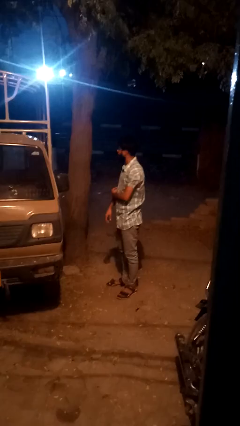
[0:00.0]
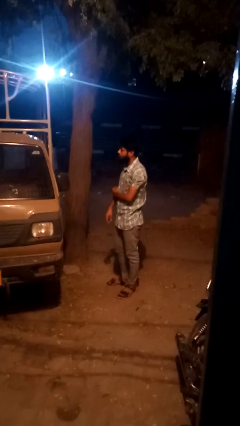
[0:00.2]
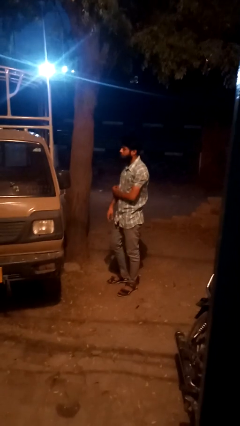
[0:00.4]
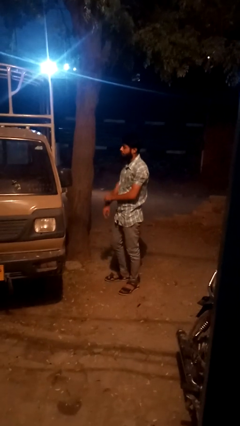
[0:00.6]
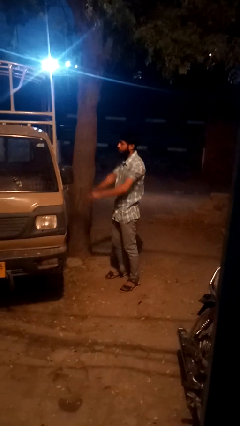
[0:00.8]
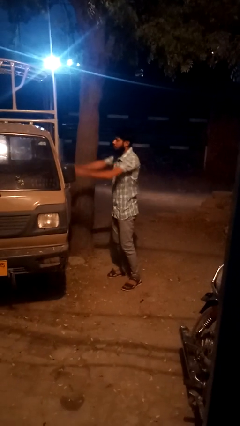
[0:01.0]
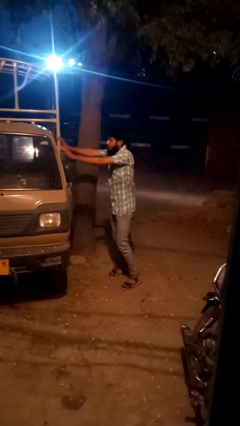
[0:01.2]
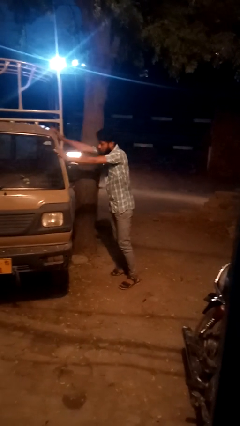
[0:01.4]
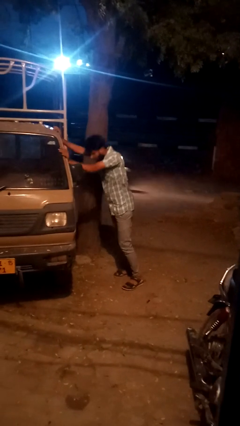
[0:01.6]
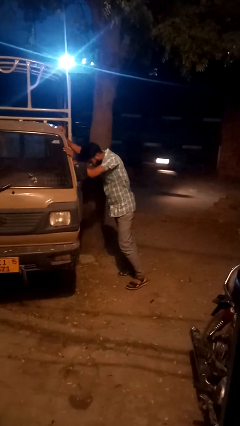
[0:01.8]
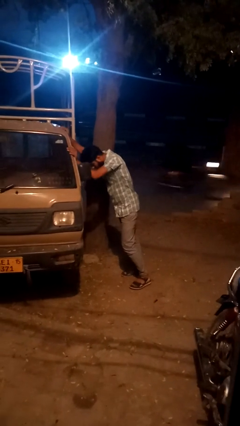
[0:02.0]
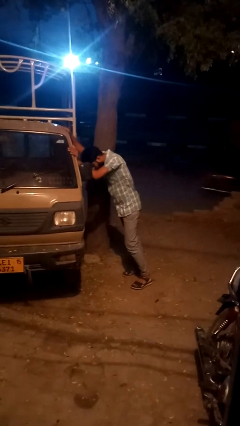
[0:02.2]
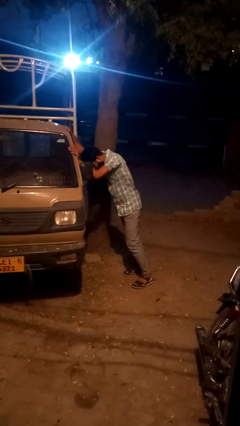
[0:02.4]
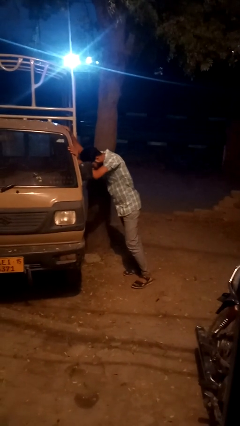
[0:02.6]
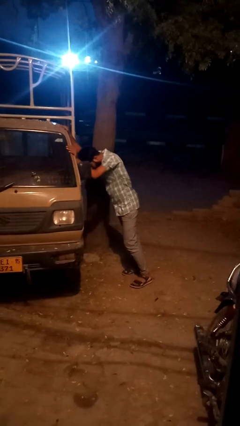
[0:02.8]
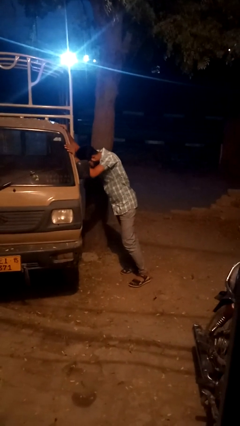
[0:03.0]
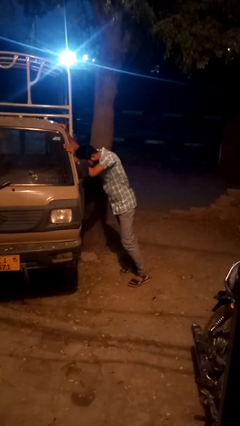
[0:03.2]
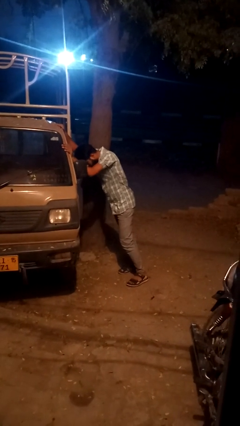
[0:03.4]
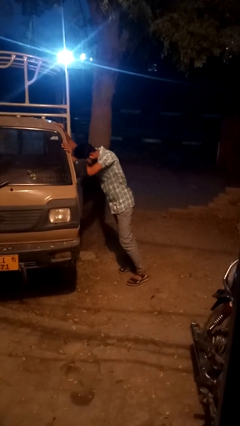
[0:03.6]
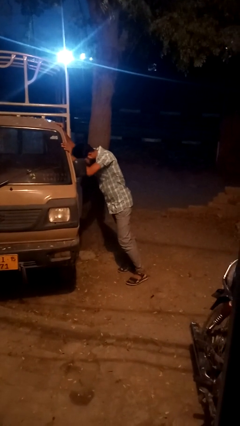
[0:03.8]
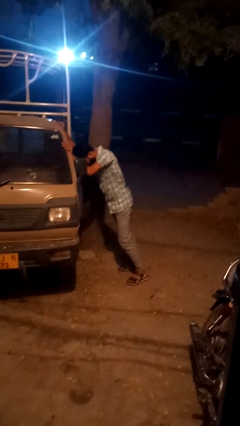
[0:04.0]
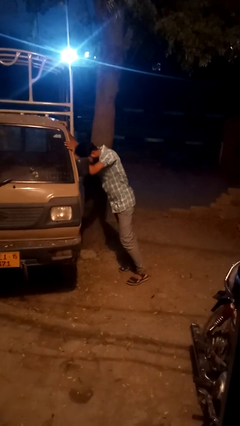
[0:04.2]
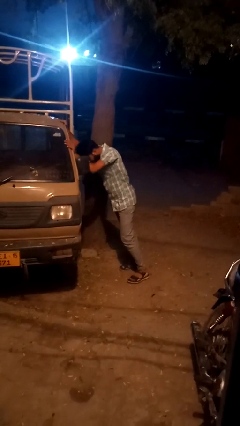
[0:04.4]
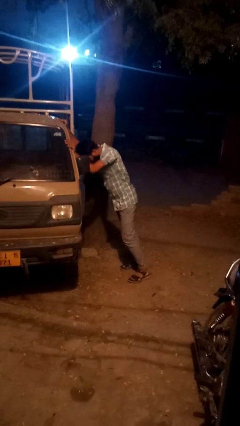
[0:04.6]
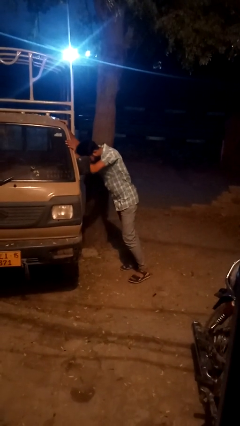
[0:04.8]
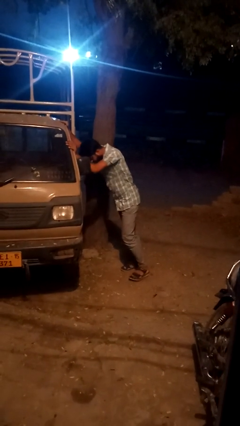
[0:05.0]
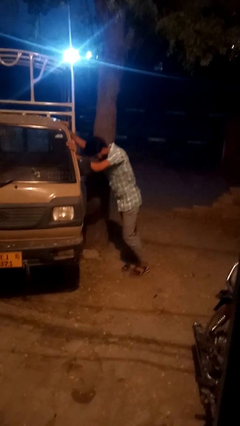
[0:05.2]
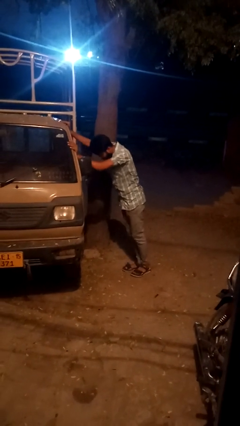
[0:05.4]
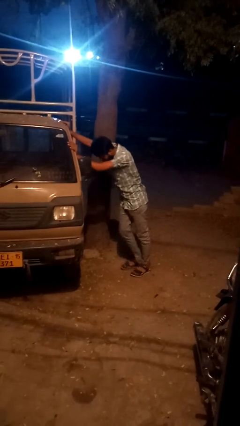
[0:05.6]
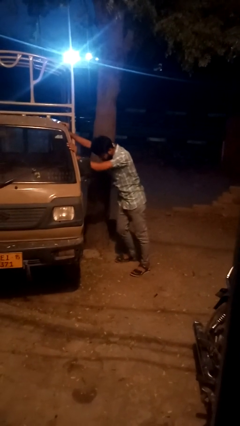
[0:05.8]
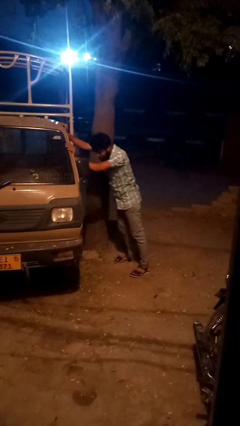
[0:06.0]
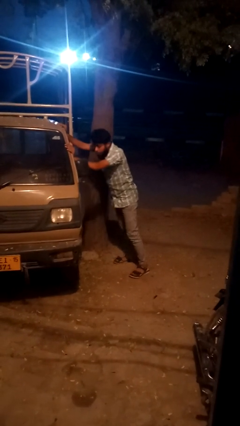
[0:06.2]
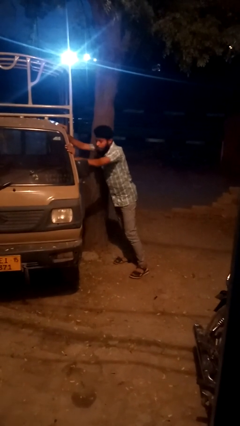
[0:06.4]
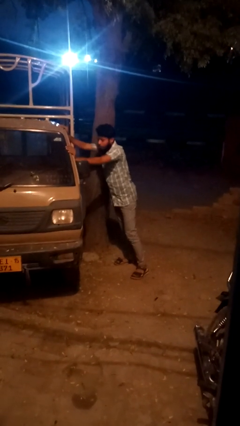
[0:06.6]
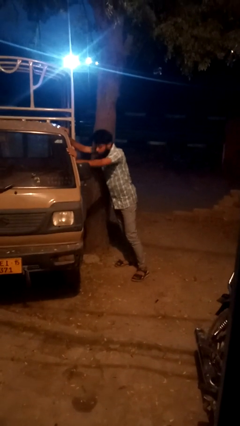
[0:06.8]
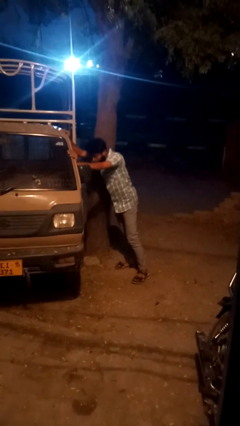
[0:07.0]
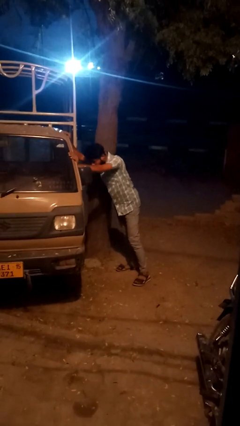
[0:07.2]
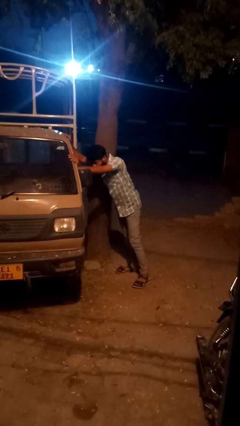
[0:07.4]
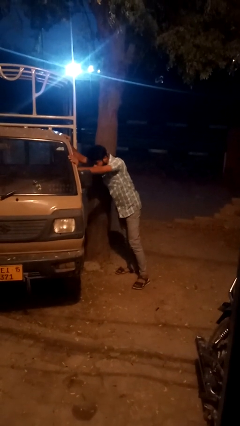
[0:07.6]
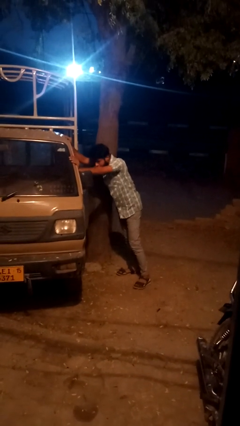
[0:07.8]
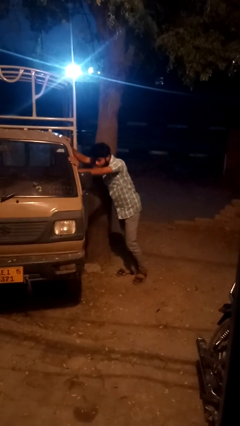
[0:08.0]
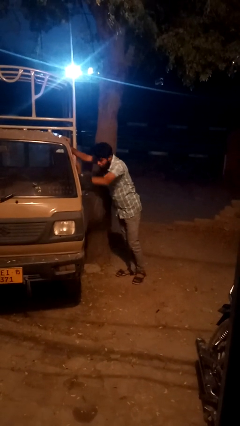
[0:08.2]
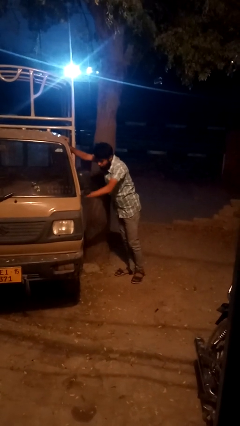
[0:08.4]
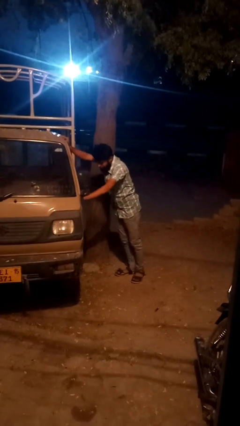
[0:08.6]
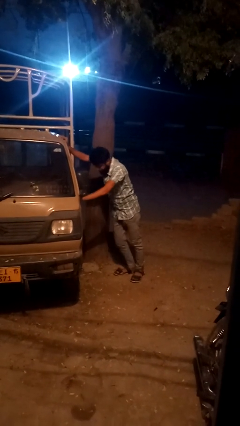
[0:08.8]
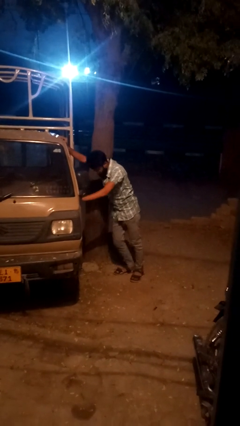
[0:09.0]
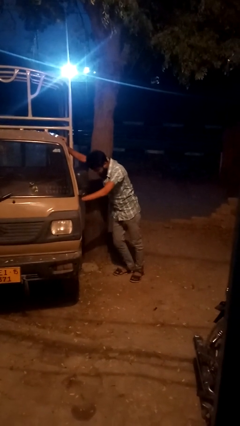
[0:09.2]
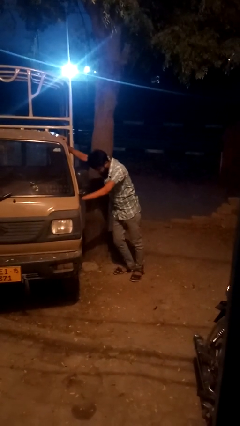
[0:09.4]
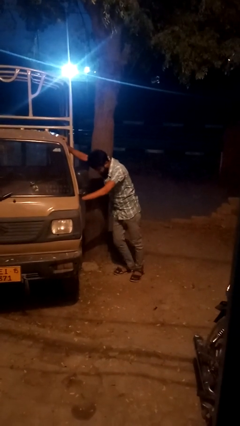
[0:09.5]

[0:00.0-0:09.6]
person leans against car

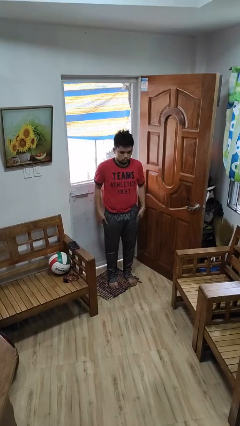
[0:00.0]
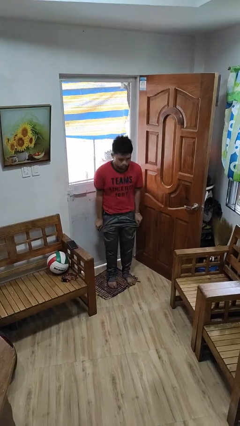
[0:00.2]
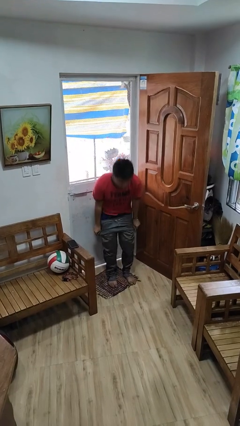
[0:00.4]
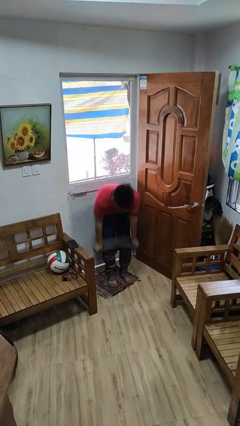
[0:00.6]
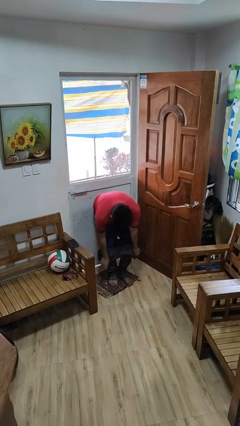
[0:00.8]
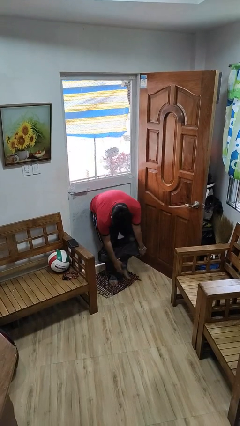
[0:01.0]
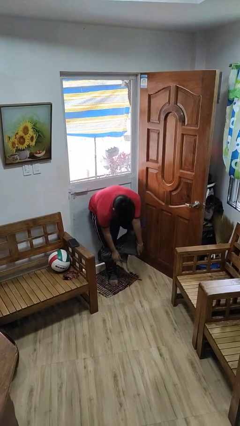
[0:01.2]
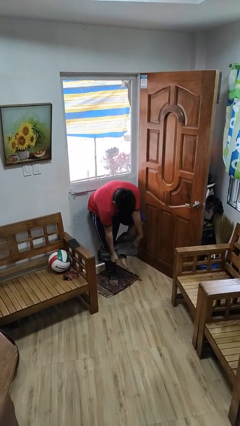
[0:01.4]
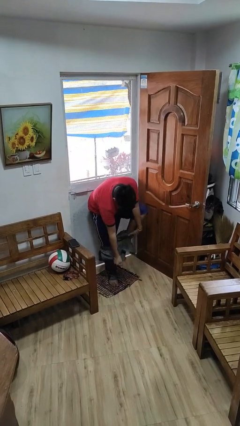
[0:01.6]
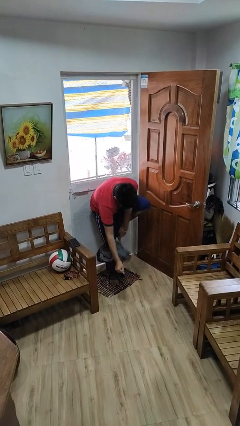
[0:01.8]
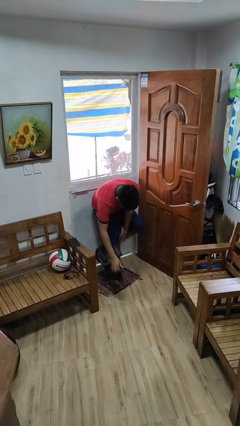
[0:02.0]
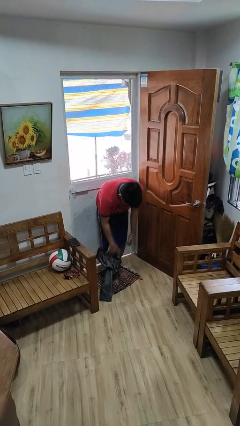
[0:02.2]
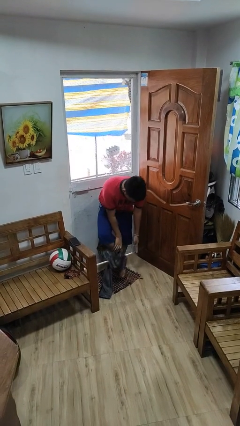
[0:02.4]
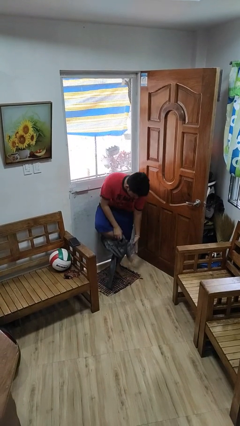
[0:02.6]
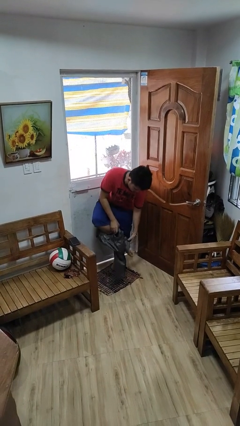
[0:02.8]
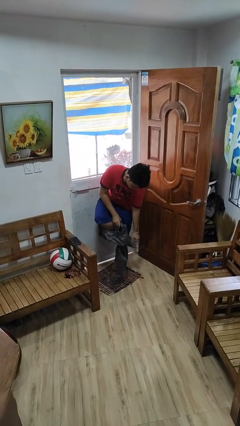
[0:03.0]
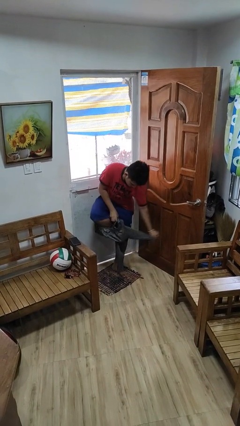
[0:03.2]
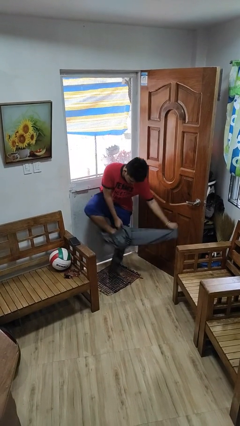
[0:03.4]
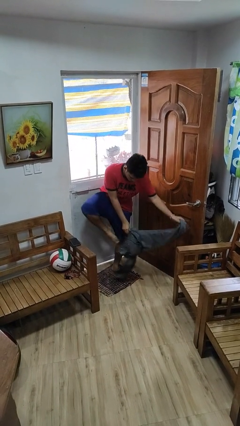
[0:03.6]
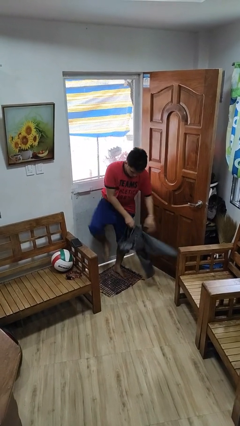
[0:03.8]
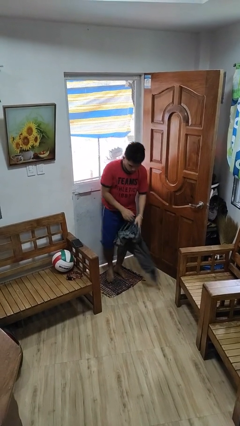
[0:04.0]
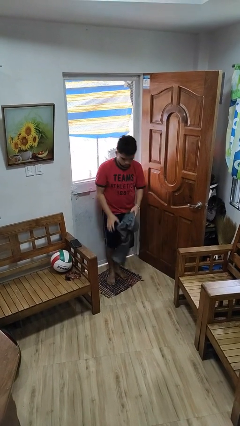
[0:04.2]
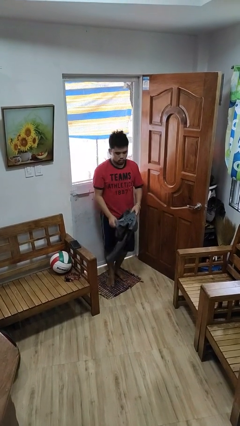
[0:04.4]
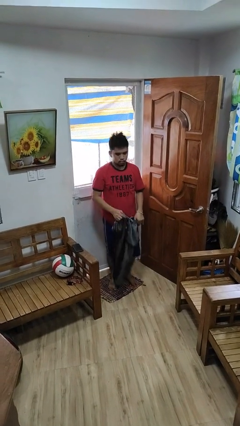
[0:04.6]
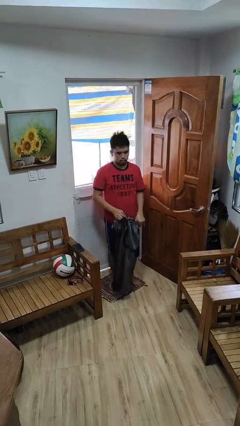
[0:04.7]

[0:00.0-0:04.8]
person takes off pants

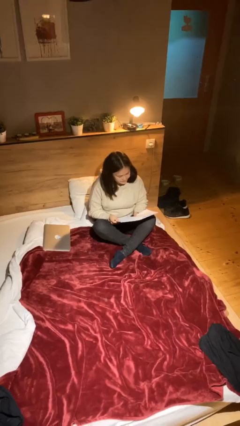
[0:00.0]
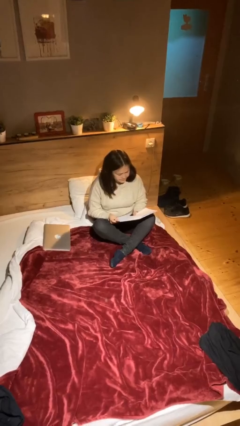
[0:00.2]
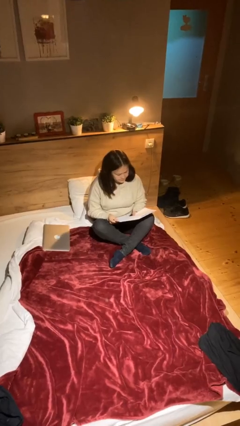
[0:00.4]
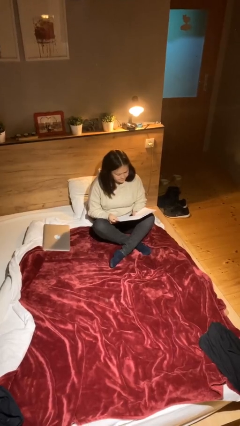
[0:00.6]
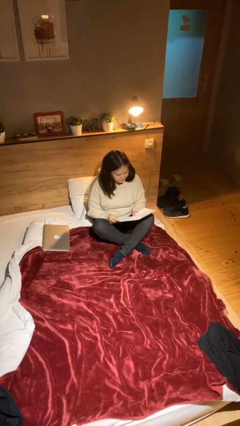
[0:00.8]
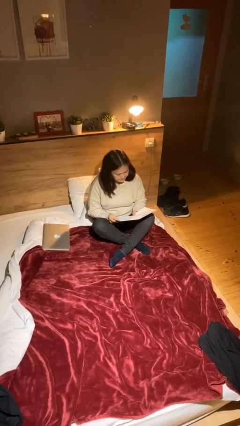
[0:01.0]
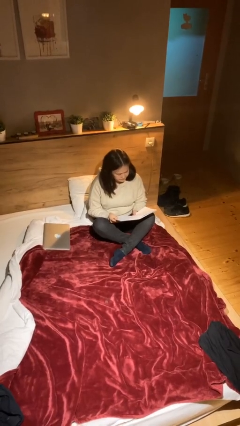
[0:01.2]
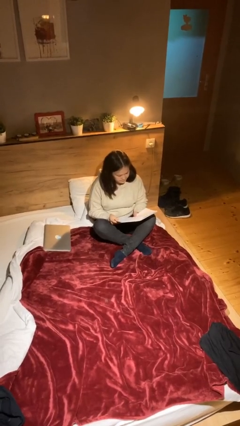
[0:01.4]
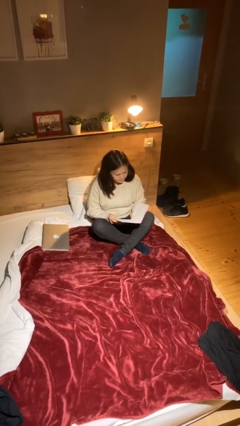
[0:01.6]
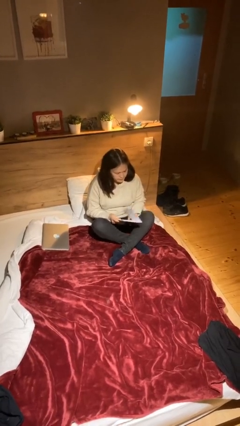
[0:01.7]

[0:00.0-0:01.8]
person reads document

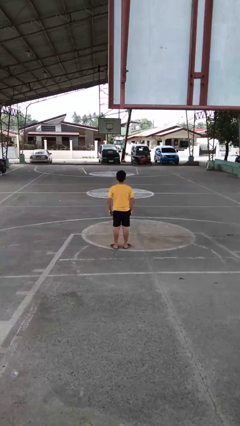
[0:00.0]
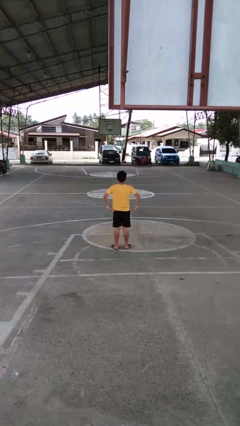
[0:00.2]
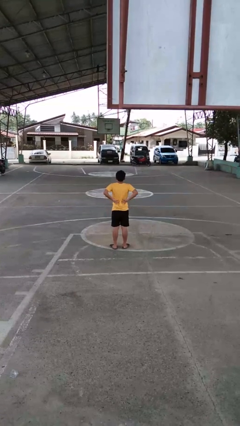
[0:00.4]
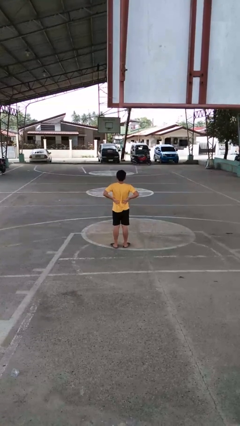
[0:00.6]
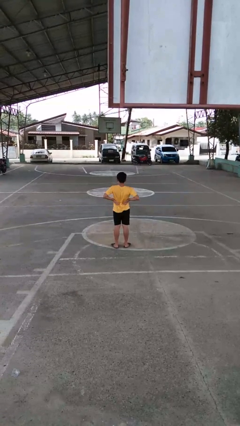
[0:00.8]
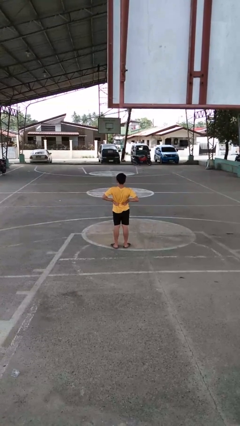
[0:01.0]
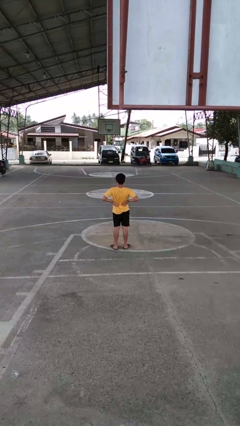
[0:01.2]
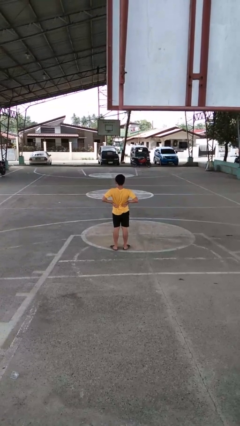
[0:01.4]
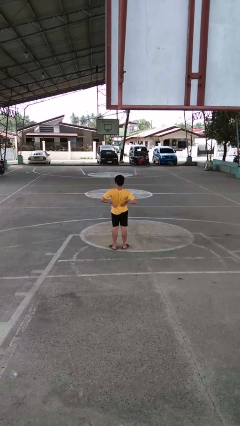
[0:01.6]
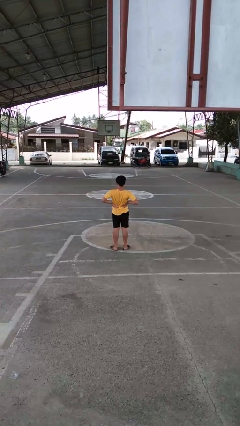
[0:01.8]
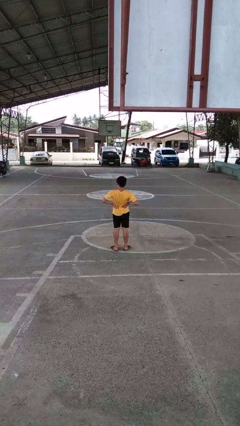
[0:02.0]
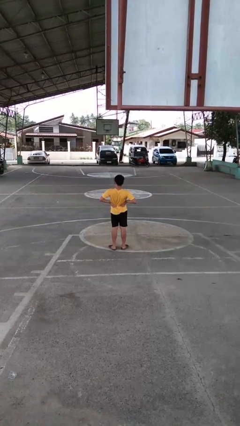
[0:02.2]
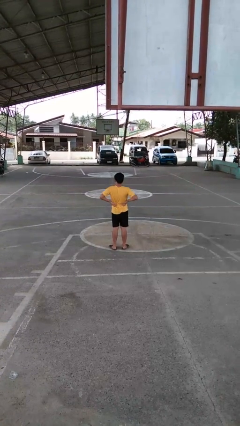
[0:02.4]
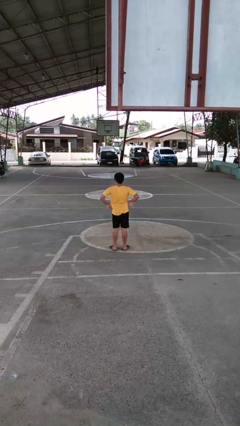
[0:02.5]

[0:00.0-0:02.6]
person stretches back
